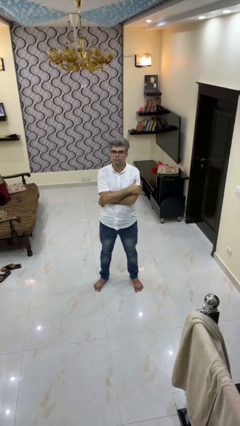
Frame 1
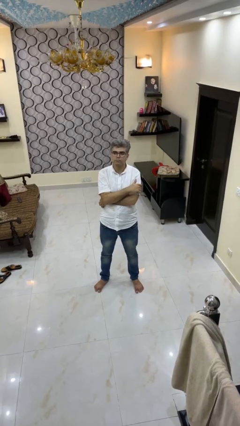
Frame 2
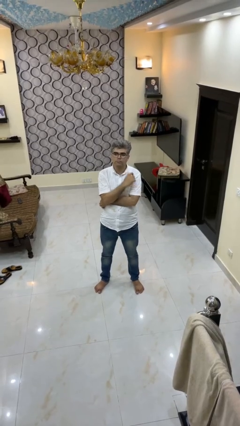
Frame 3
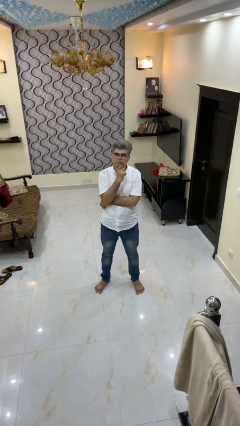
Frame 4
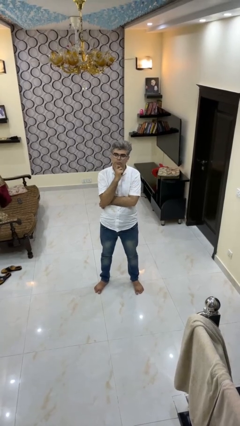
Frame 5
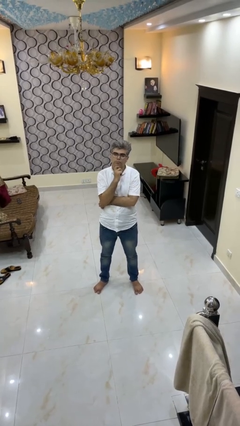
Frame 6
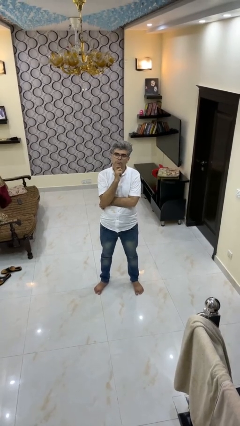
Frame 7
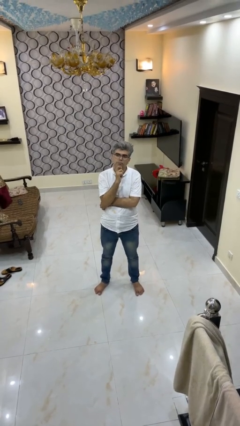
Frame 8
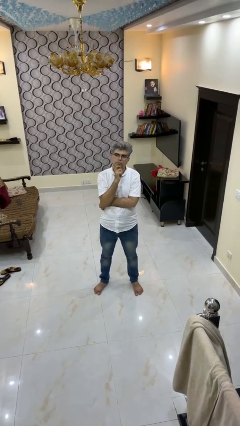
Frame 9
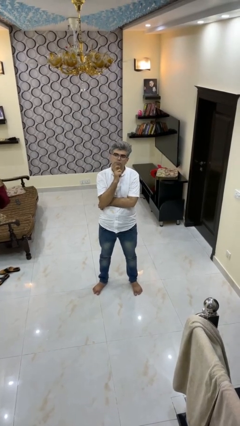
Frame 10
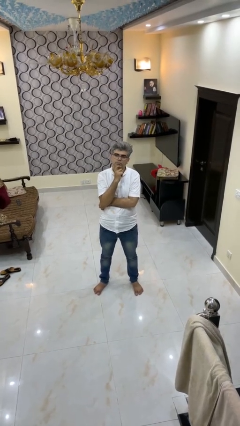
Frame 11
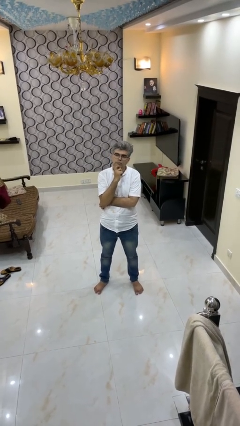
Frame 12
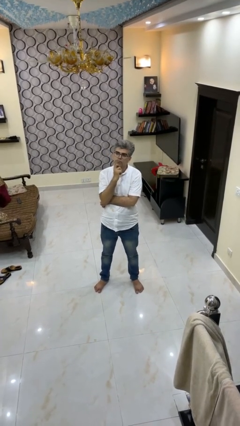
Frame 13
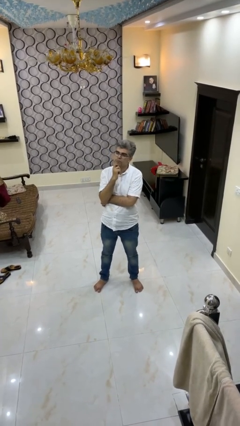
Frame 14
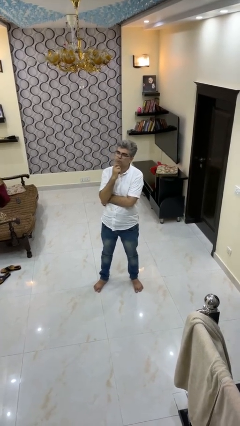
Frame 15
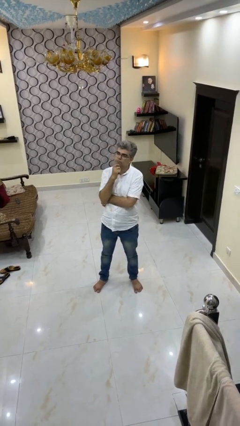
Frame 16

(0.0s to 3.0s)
person strokes chin

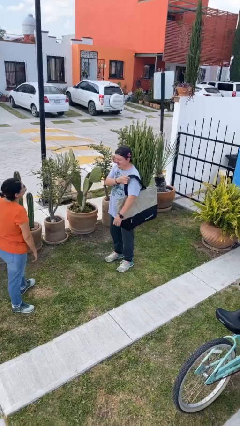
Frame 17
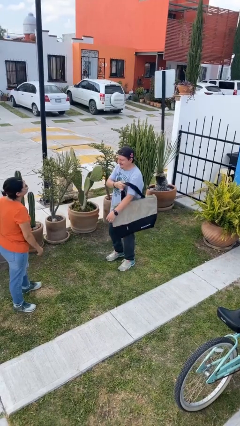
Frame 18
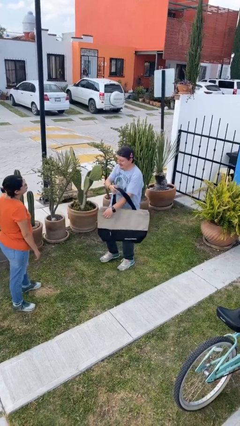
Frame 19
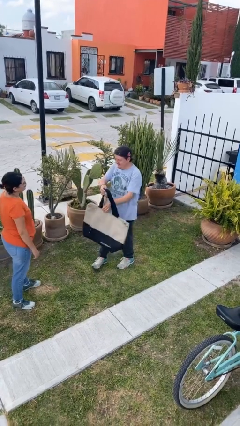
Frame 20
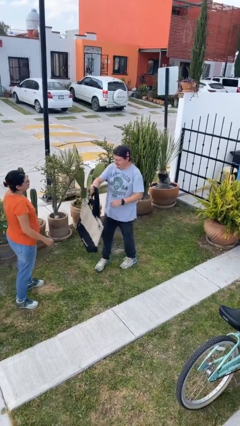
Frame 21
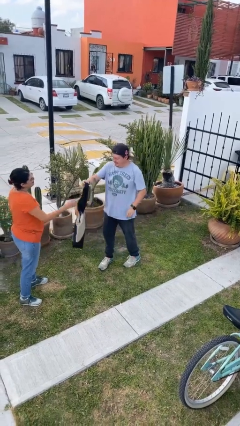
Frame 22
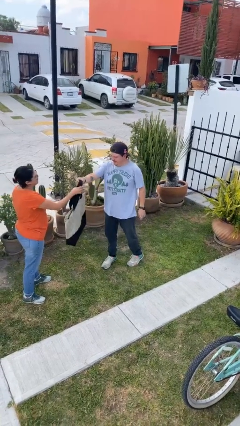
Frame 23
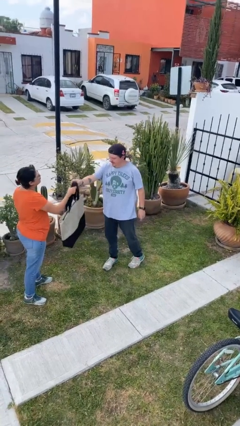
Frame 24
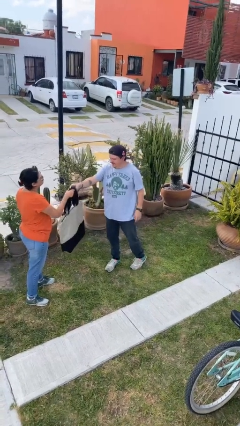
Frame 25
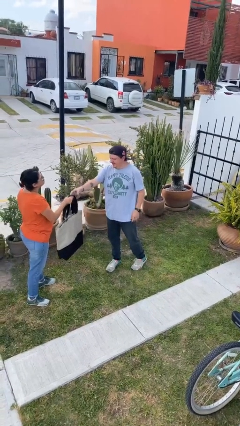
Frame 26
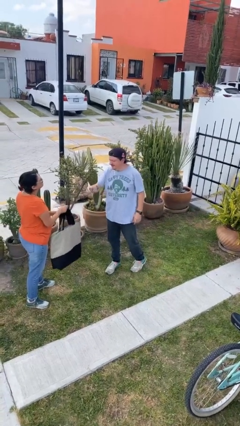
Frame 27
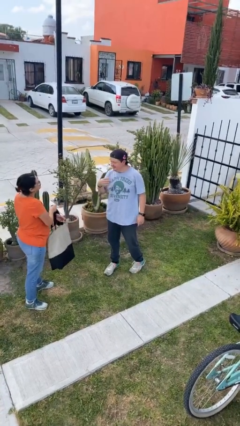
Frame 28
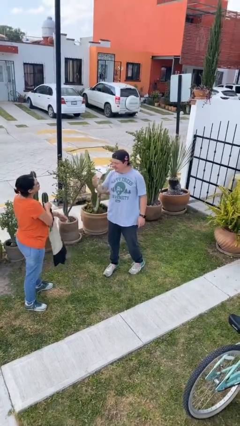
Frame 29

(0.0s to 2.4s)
person transfers object to person

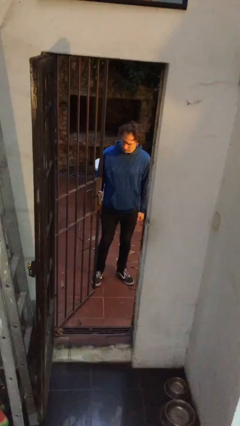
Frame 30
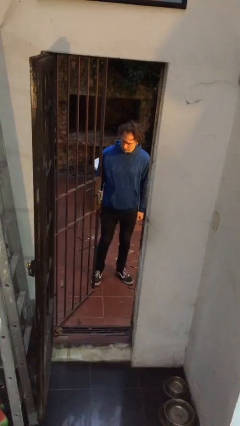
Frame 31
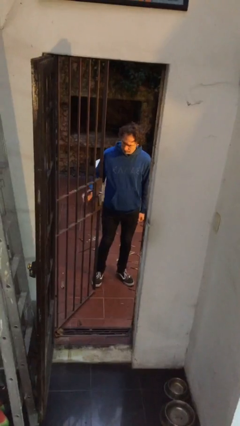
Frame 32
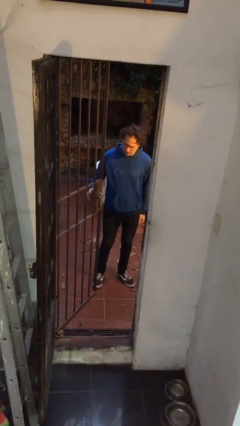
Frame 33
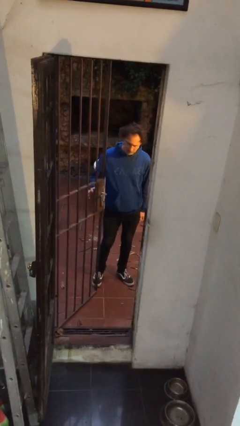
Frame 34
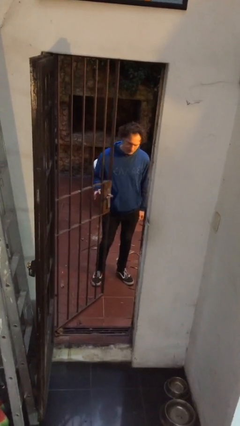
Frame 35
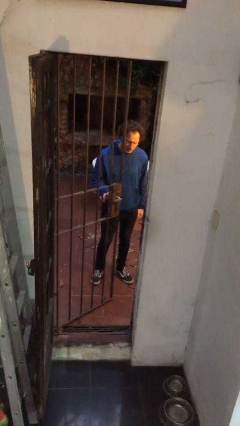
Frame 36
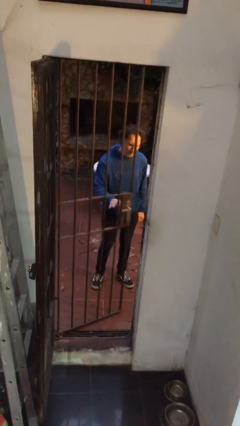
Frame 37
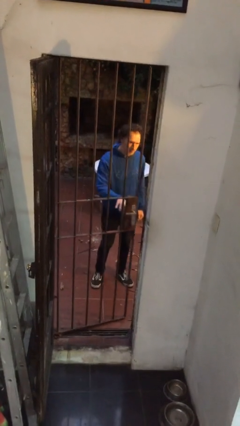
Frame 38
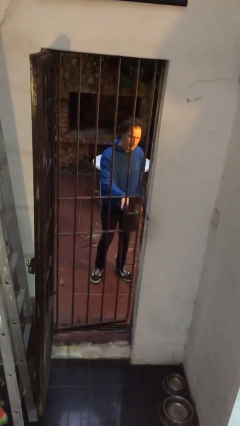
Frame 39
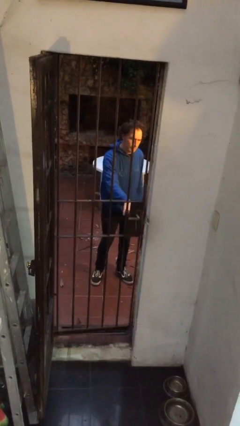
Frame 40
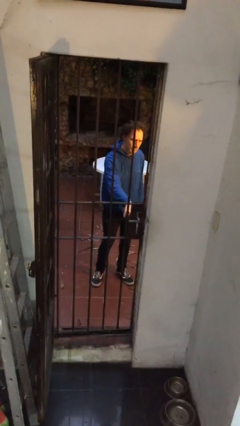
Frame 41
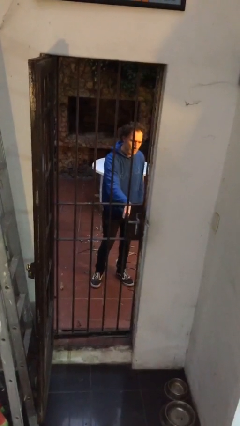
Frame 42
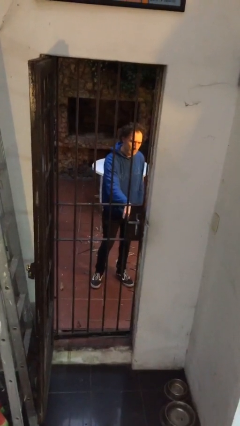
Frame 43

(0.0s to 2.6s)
person closes gate

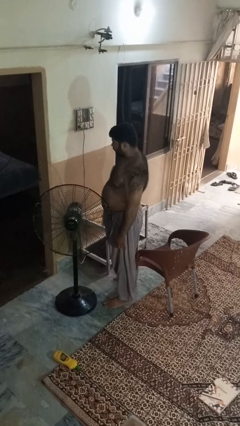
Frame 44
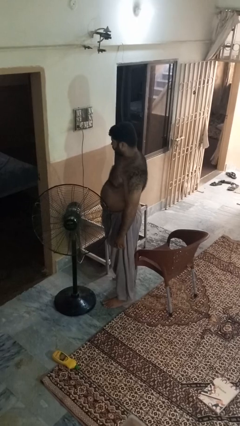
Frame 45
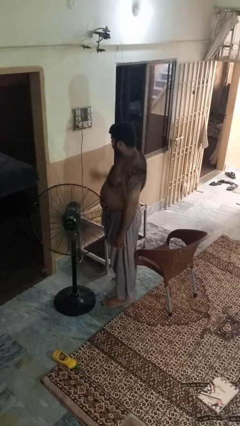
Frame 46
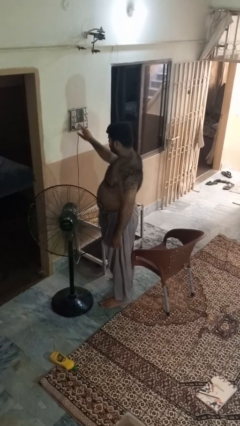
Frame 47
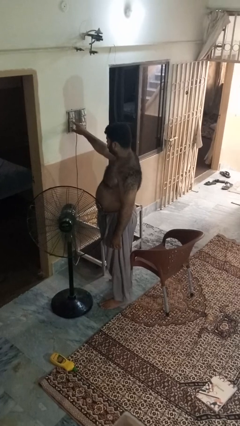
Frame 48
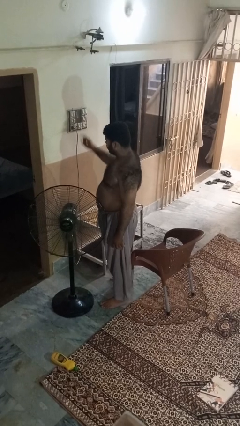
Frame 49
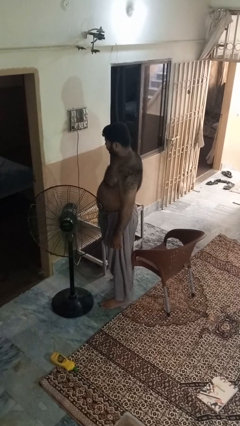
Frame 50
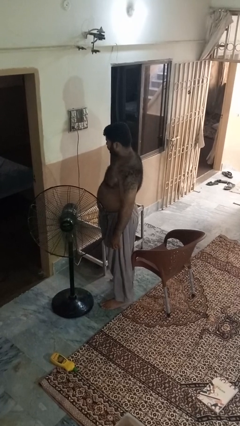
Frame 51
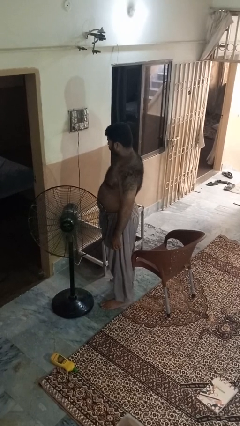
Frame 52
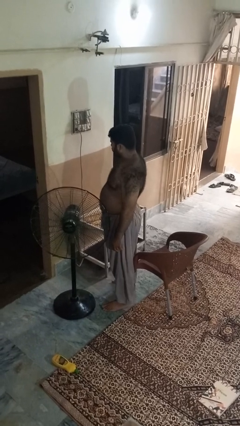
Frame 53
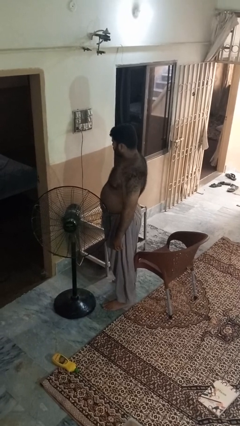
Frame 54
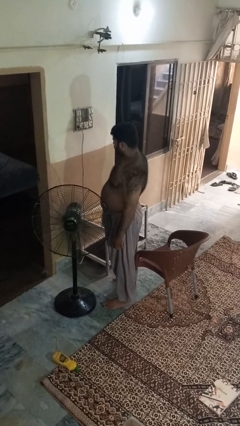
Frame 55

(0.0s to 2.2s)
person turns off fan

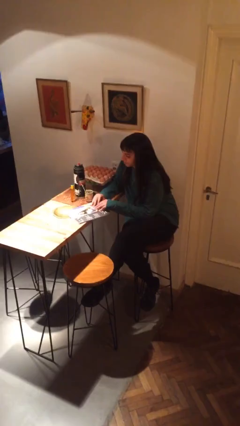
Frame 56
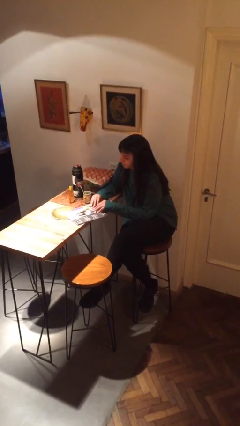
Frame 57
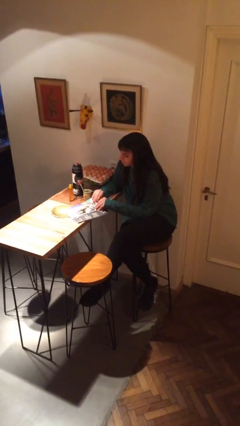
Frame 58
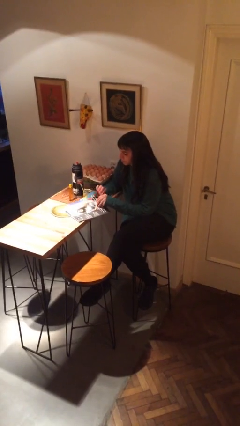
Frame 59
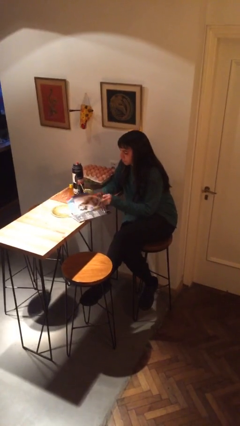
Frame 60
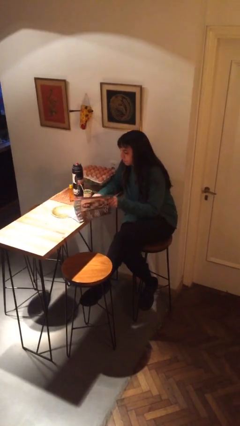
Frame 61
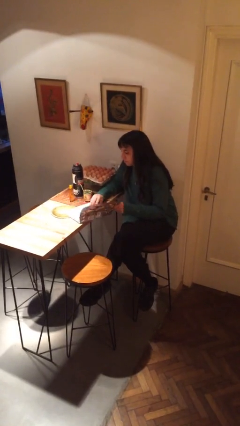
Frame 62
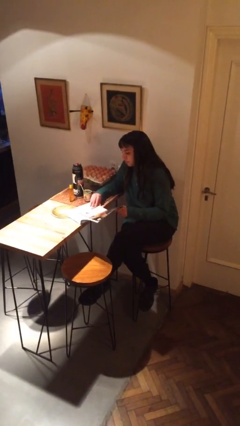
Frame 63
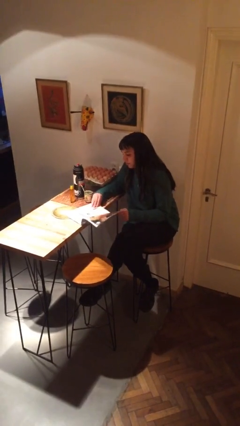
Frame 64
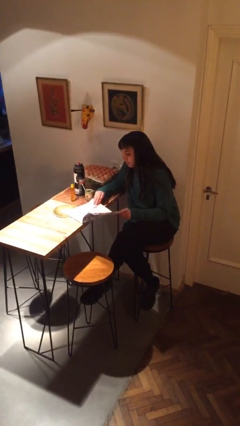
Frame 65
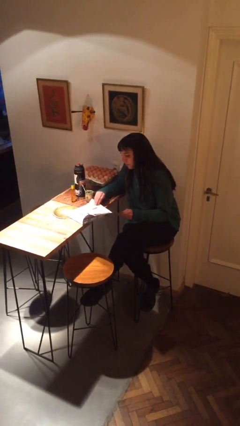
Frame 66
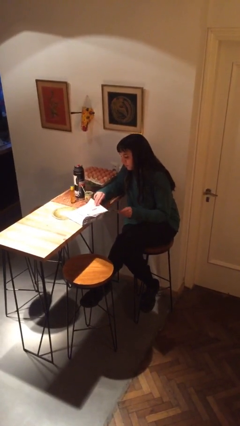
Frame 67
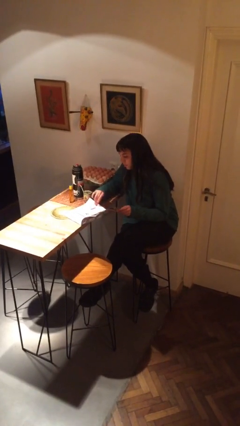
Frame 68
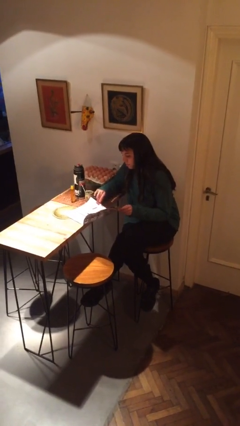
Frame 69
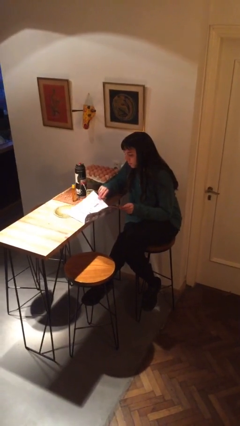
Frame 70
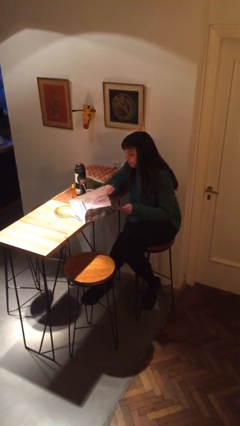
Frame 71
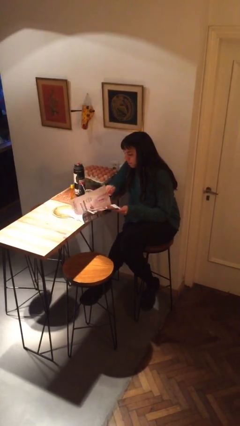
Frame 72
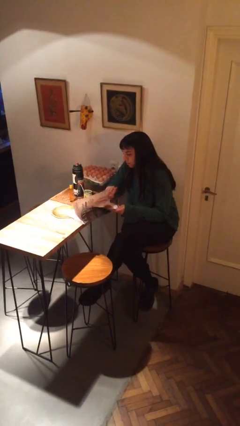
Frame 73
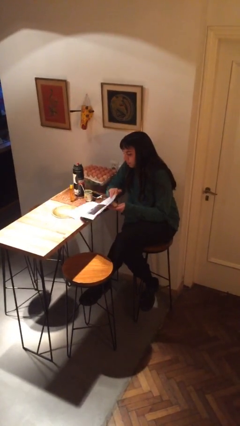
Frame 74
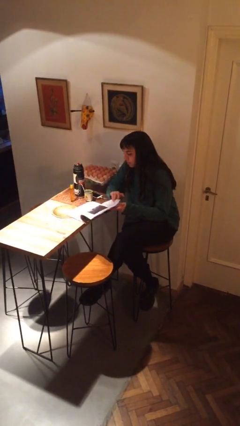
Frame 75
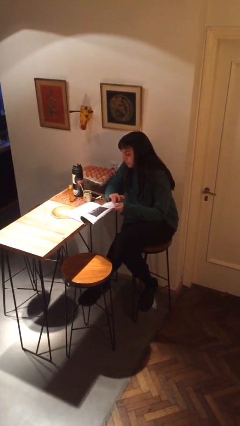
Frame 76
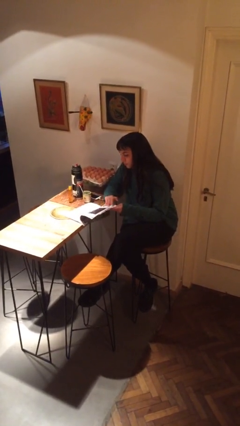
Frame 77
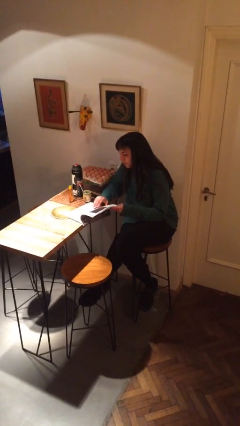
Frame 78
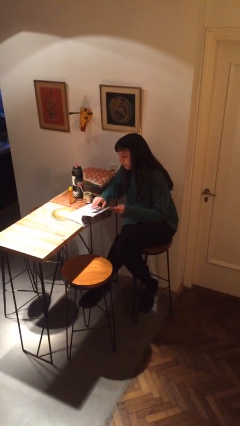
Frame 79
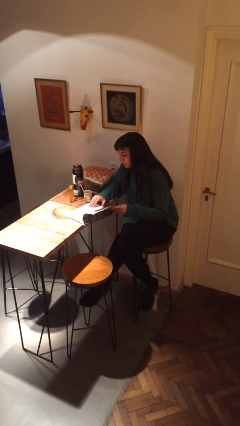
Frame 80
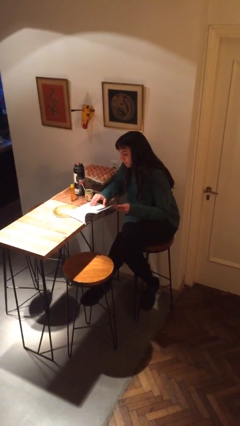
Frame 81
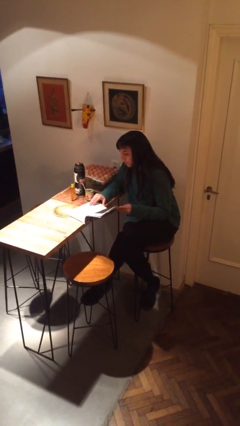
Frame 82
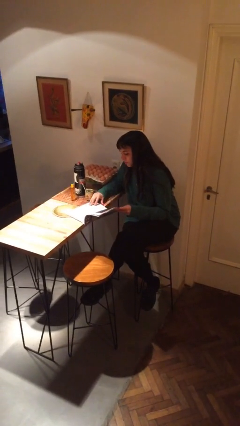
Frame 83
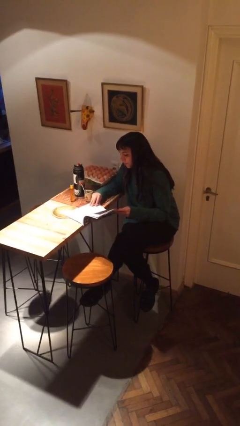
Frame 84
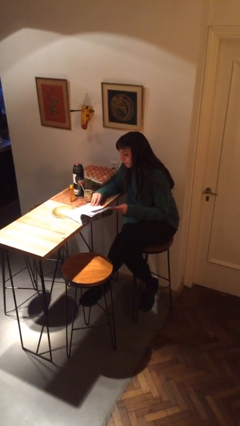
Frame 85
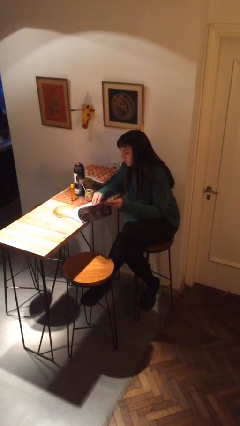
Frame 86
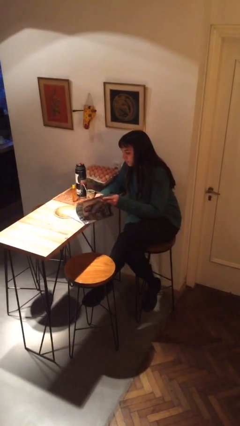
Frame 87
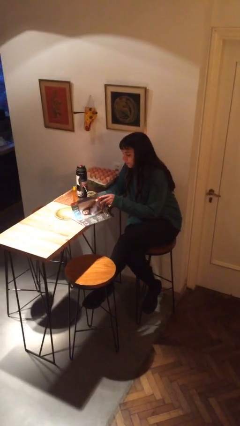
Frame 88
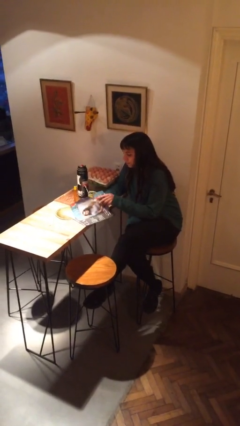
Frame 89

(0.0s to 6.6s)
person reads magazine

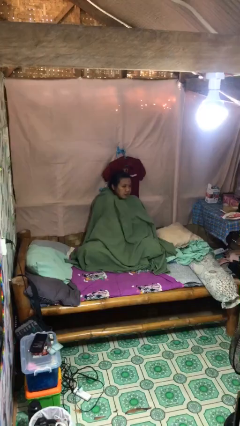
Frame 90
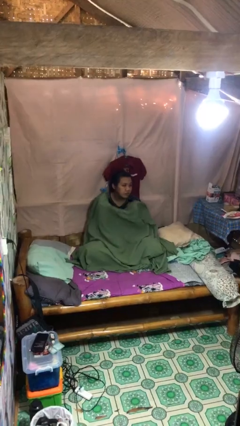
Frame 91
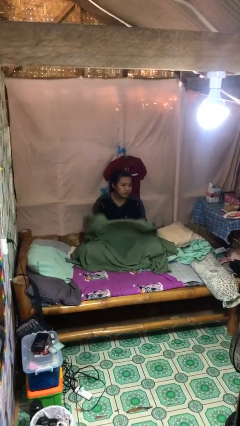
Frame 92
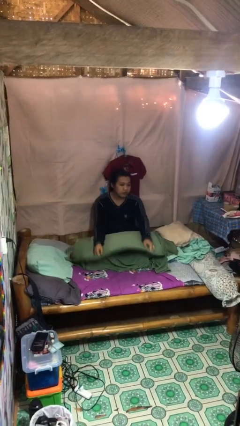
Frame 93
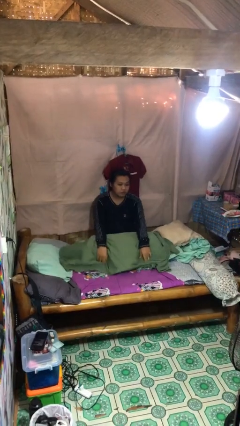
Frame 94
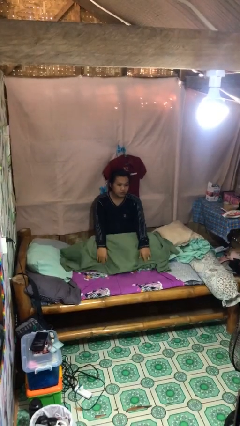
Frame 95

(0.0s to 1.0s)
person uncovers with blanket
